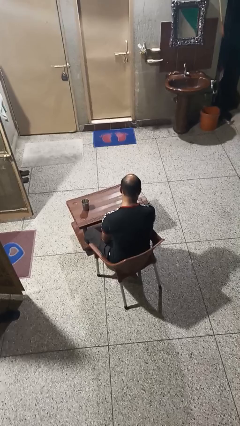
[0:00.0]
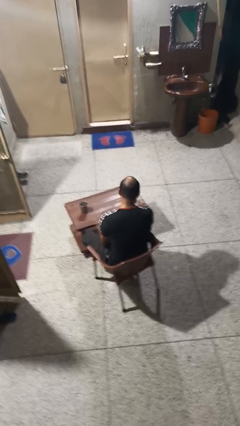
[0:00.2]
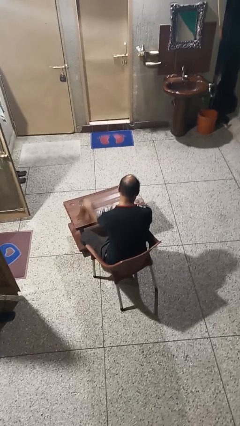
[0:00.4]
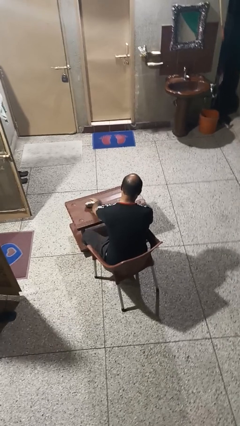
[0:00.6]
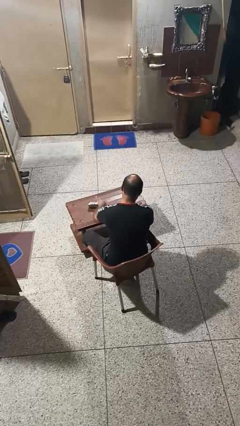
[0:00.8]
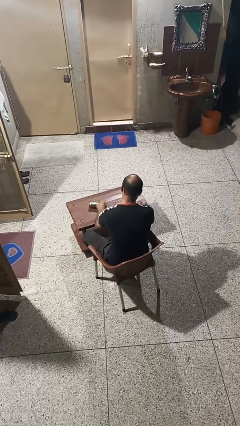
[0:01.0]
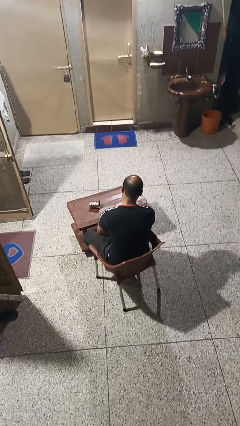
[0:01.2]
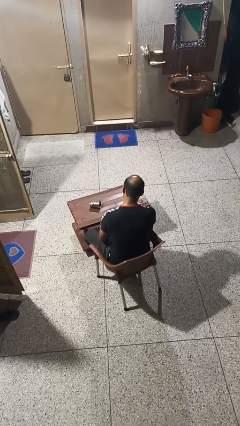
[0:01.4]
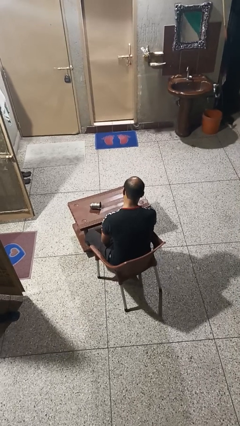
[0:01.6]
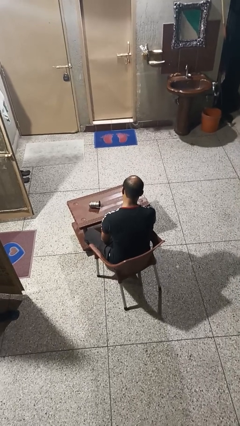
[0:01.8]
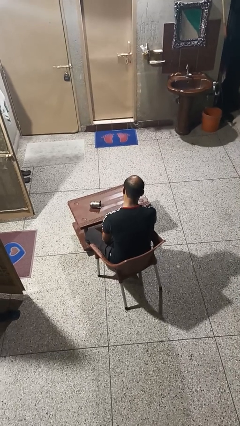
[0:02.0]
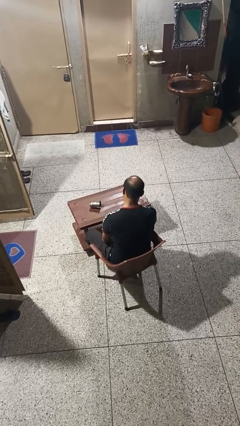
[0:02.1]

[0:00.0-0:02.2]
person knocks over glass

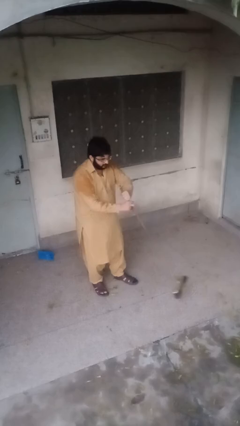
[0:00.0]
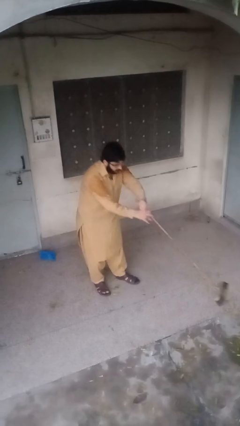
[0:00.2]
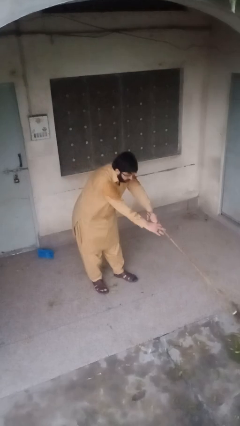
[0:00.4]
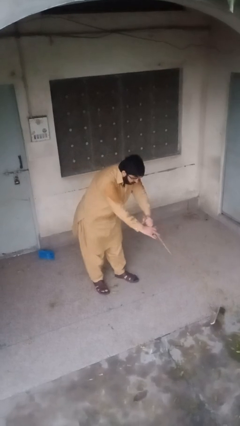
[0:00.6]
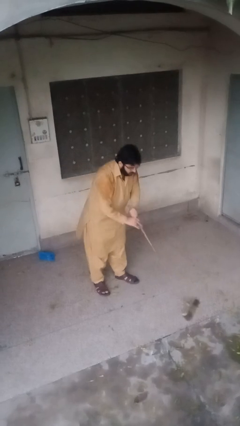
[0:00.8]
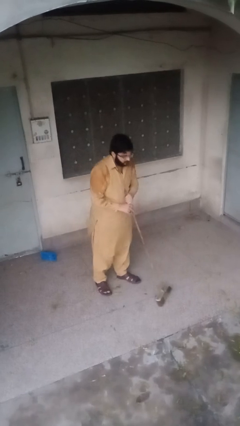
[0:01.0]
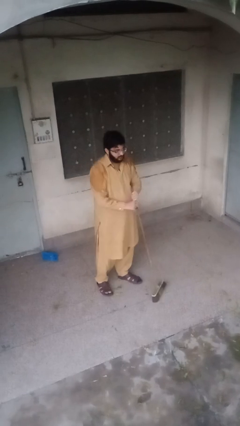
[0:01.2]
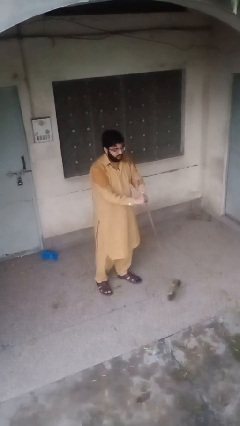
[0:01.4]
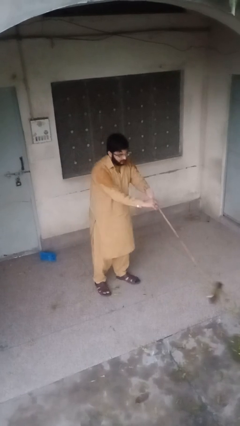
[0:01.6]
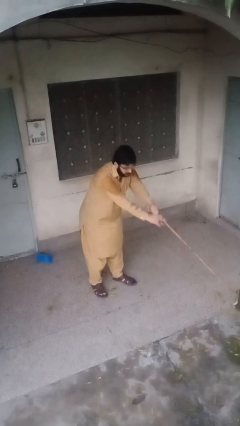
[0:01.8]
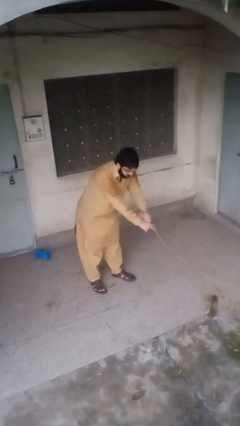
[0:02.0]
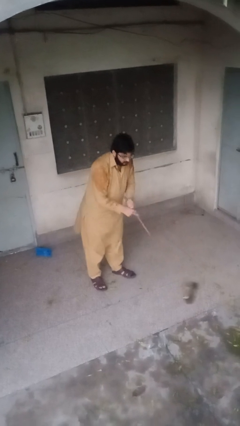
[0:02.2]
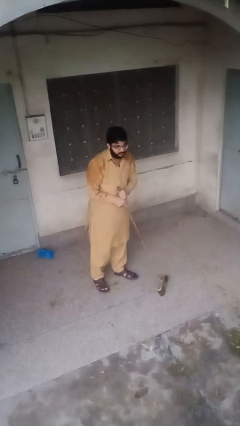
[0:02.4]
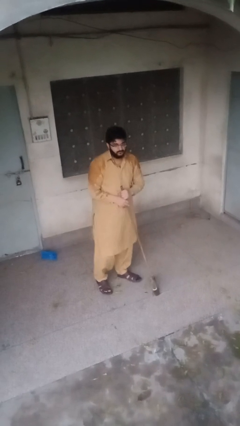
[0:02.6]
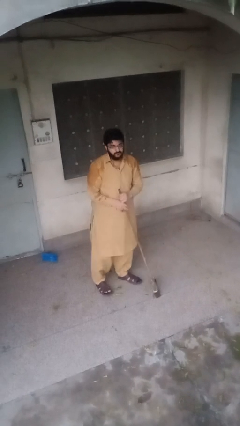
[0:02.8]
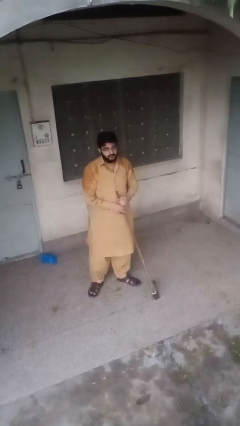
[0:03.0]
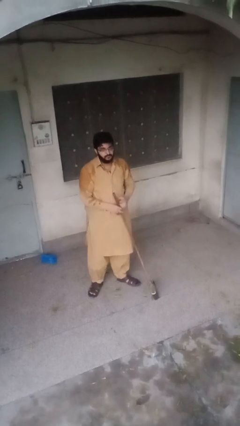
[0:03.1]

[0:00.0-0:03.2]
person sweeps floor

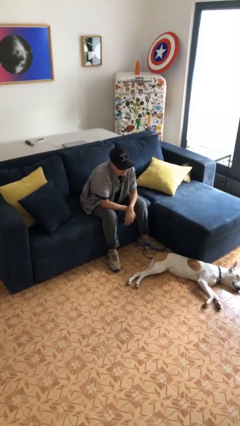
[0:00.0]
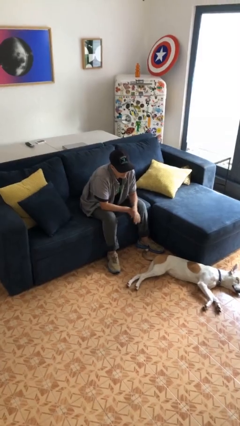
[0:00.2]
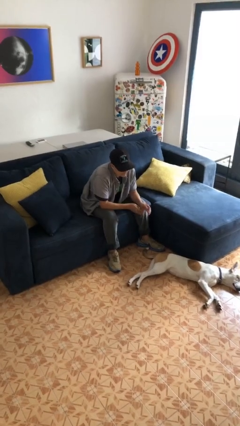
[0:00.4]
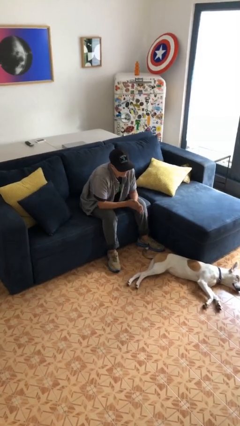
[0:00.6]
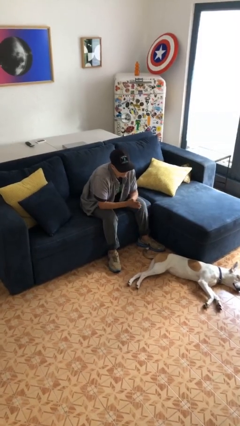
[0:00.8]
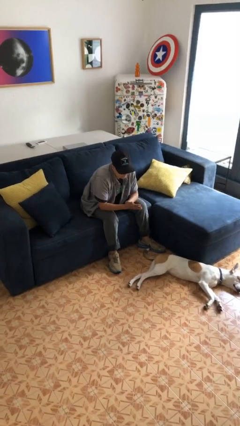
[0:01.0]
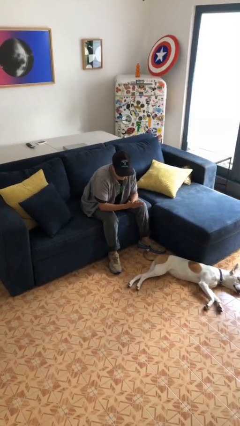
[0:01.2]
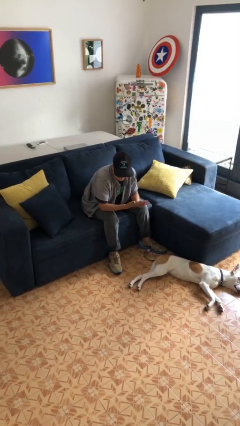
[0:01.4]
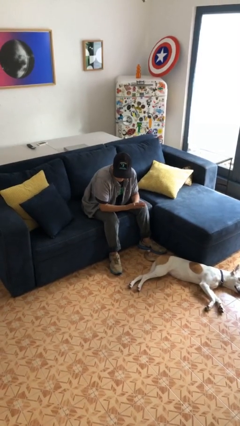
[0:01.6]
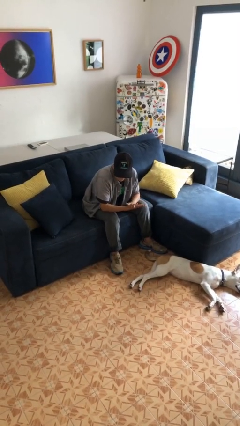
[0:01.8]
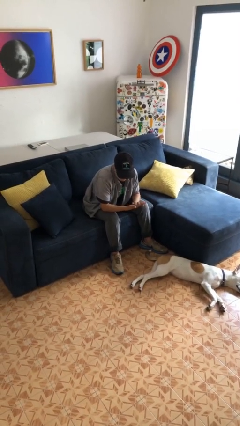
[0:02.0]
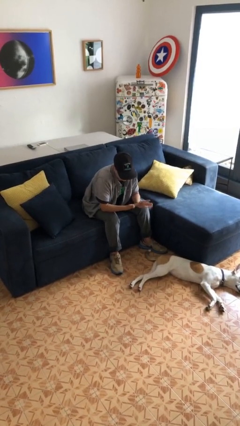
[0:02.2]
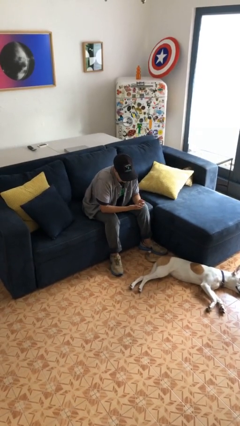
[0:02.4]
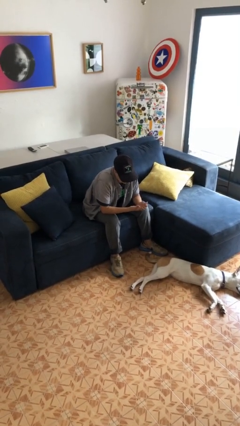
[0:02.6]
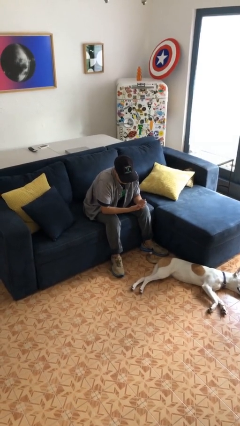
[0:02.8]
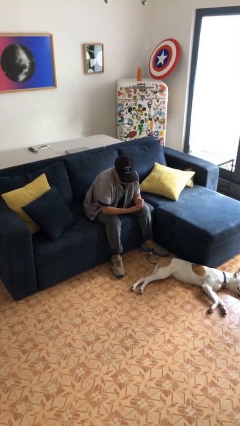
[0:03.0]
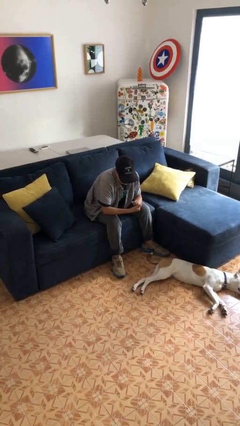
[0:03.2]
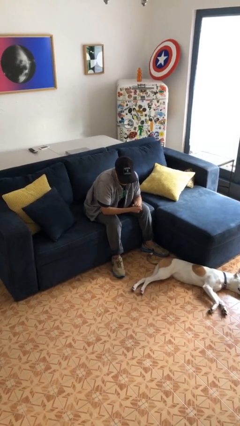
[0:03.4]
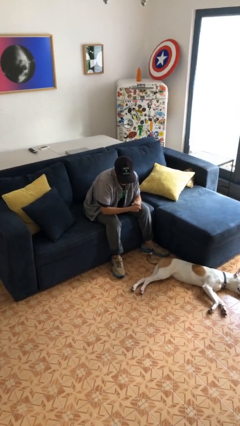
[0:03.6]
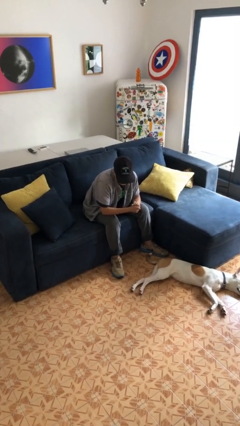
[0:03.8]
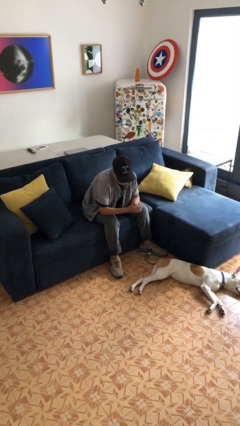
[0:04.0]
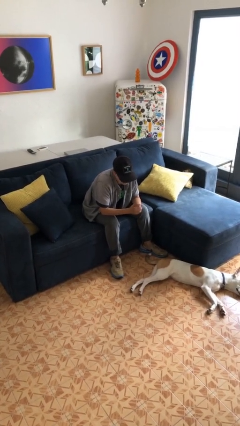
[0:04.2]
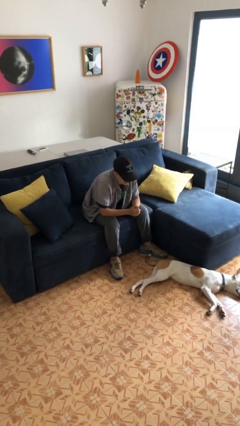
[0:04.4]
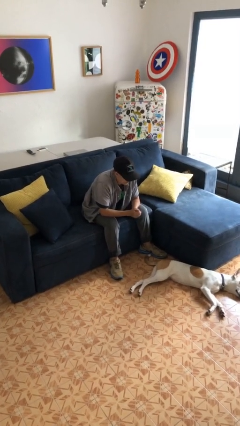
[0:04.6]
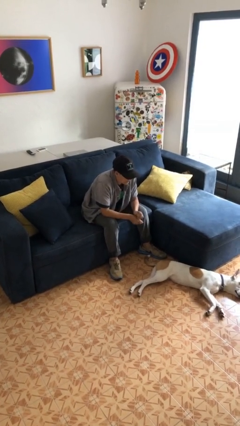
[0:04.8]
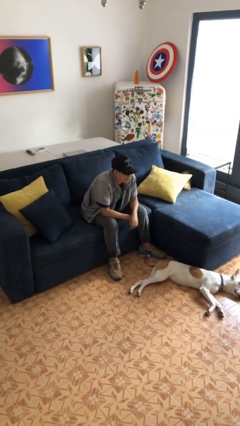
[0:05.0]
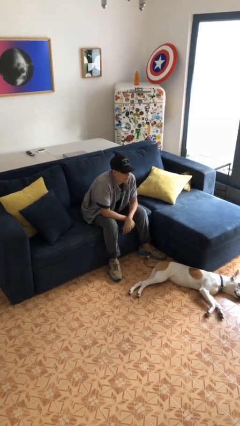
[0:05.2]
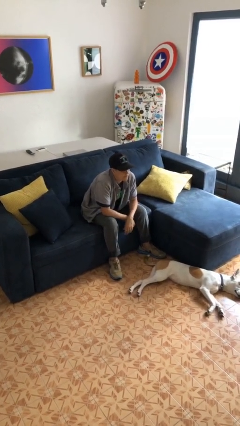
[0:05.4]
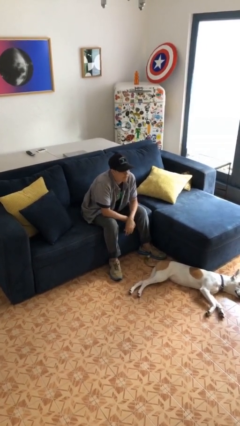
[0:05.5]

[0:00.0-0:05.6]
person looks at hands in lap

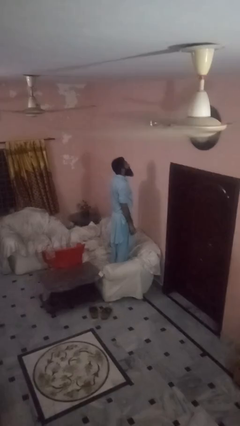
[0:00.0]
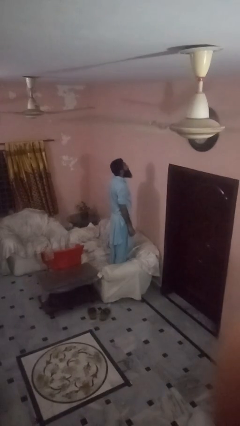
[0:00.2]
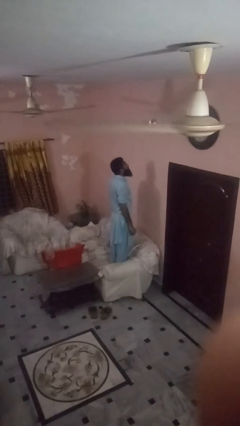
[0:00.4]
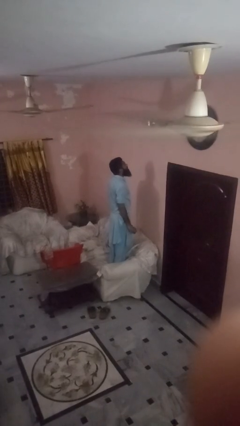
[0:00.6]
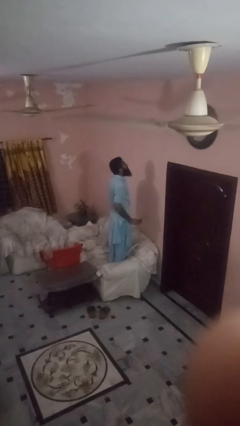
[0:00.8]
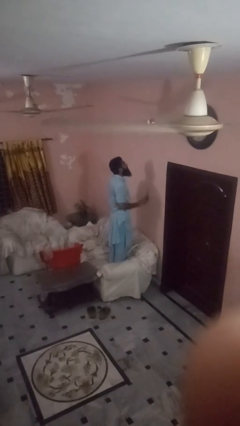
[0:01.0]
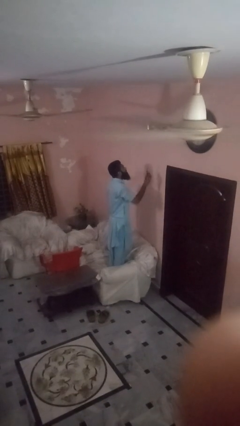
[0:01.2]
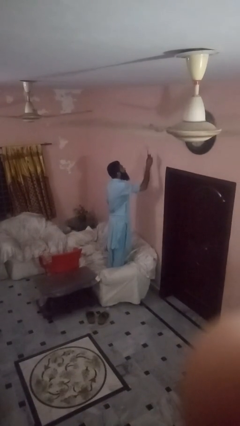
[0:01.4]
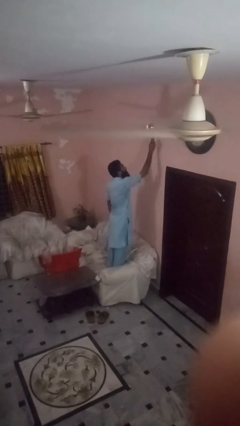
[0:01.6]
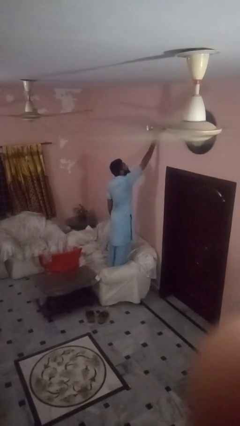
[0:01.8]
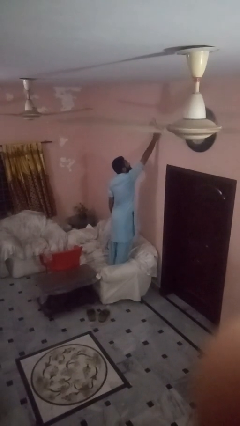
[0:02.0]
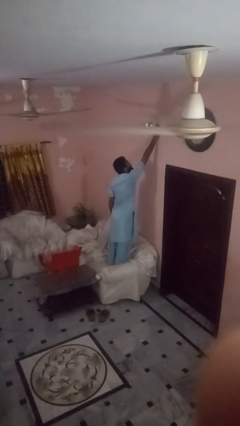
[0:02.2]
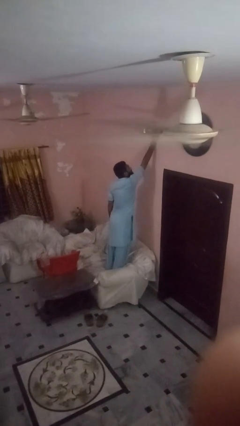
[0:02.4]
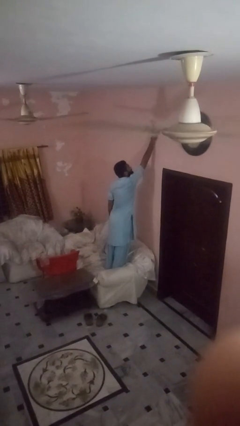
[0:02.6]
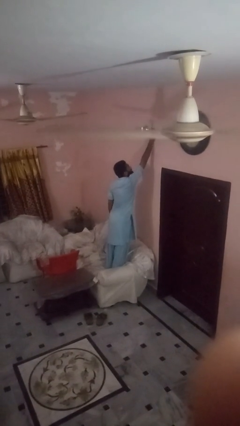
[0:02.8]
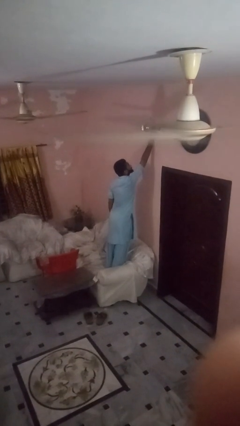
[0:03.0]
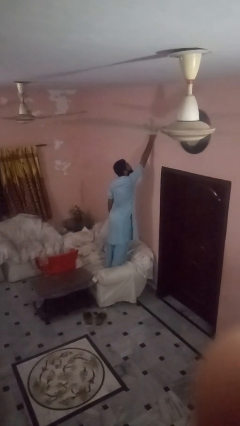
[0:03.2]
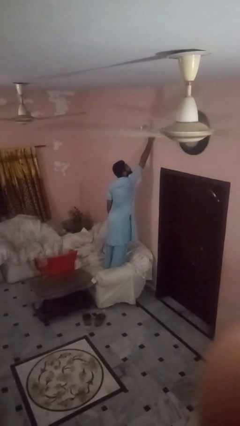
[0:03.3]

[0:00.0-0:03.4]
person puts up smoke detector

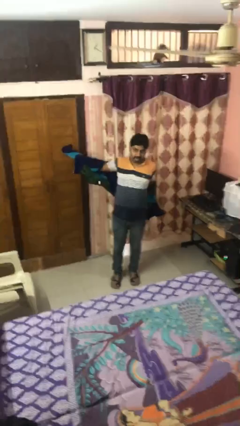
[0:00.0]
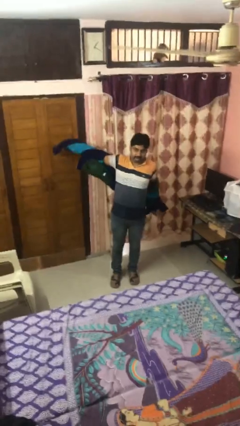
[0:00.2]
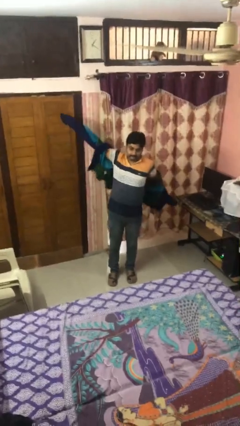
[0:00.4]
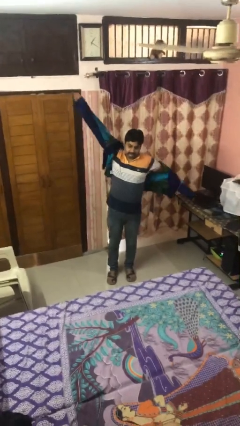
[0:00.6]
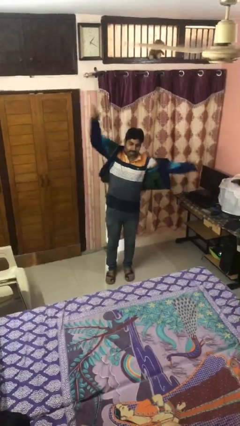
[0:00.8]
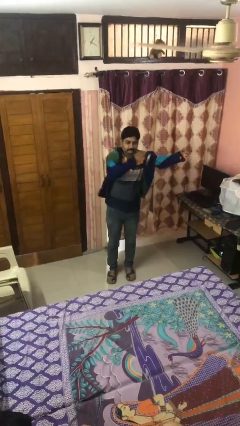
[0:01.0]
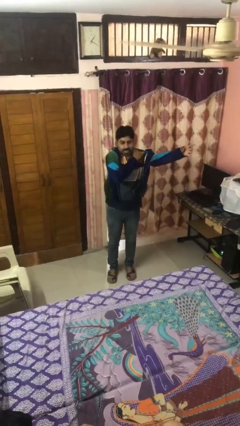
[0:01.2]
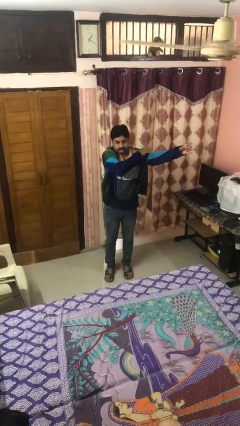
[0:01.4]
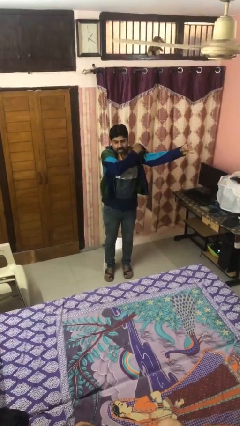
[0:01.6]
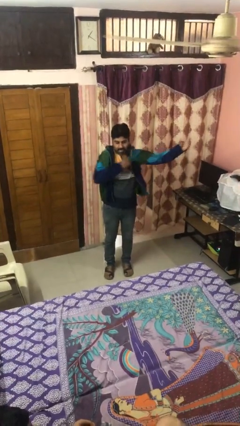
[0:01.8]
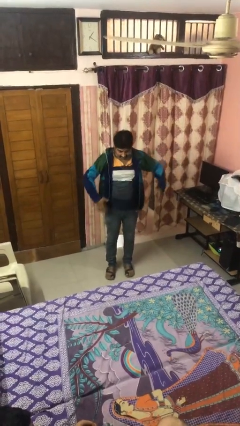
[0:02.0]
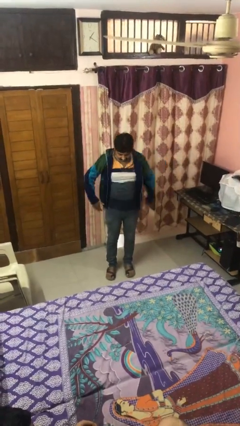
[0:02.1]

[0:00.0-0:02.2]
person puts on jacket

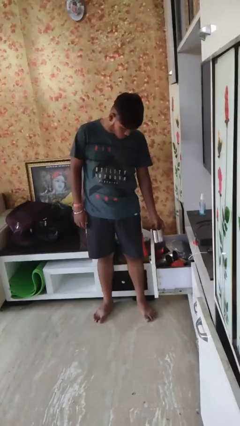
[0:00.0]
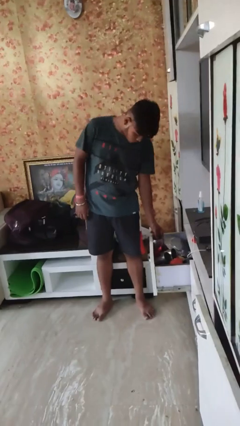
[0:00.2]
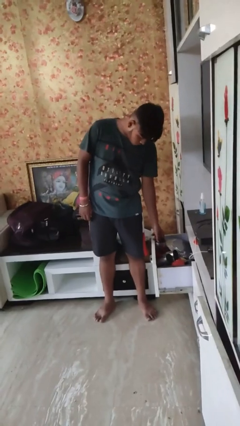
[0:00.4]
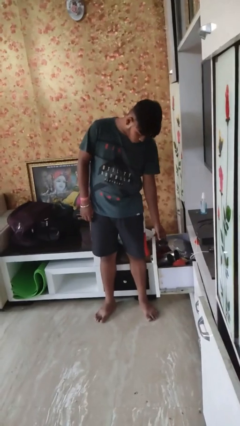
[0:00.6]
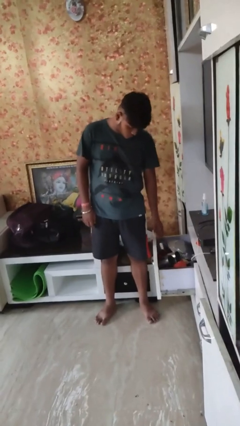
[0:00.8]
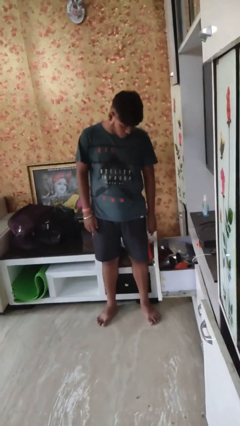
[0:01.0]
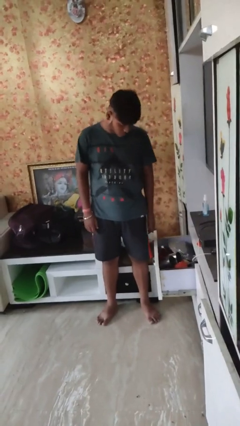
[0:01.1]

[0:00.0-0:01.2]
person puts object into kitchen drawer
